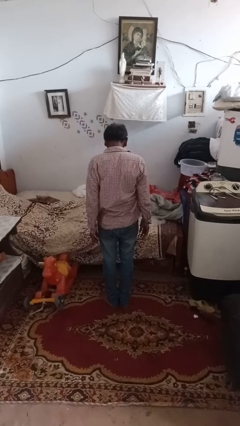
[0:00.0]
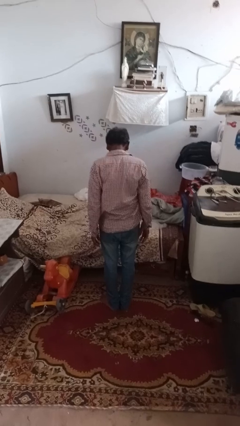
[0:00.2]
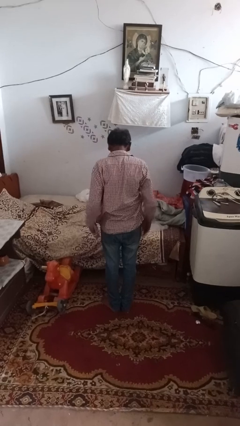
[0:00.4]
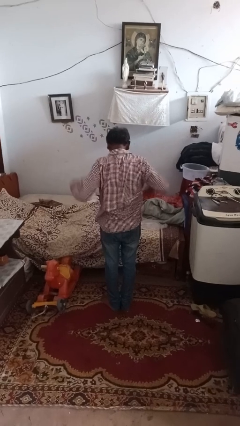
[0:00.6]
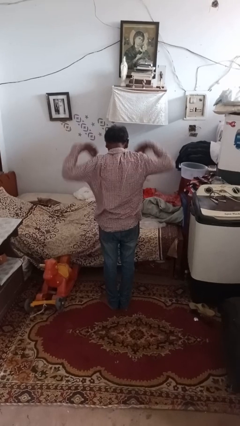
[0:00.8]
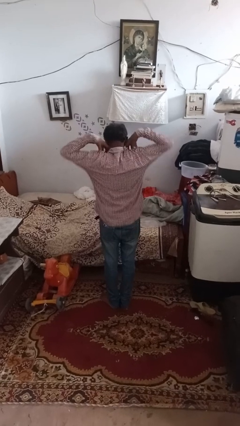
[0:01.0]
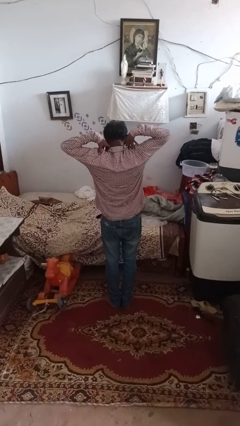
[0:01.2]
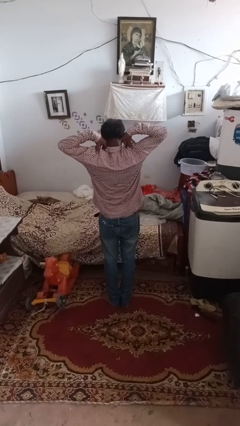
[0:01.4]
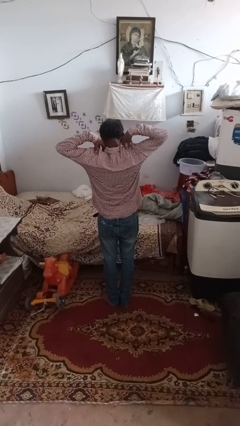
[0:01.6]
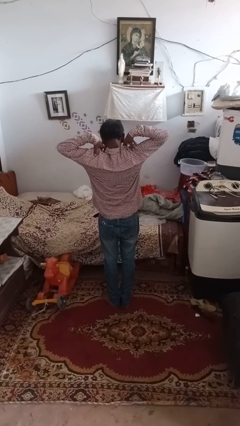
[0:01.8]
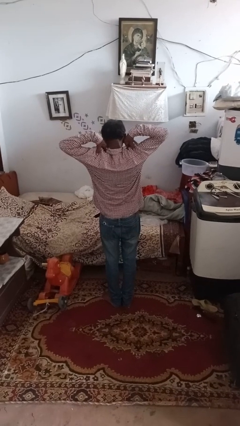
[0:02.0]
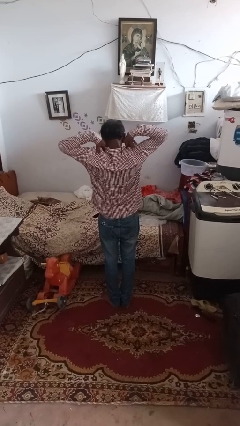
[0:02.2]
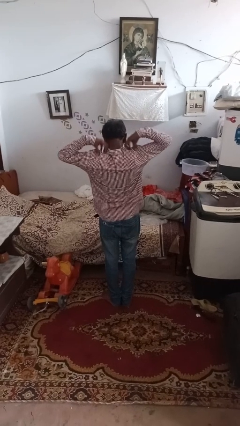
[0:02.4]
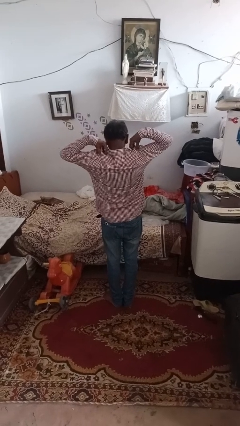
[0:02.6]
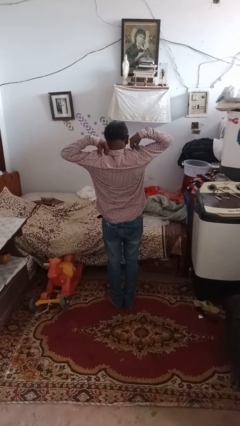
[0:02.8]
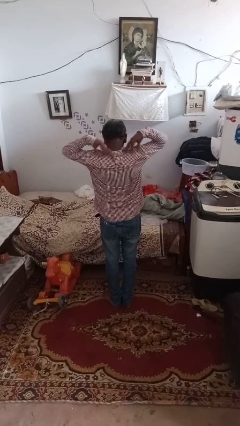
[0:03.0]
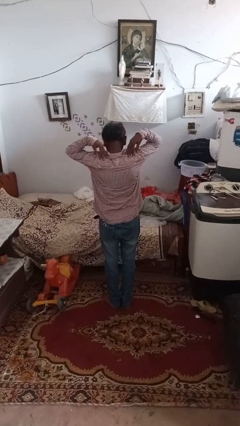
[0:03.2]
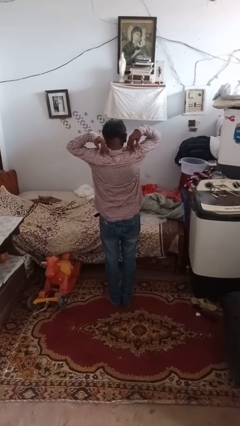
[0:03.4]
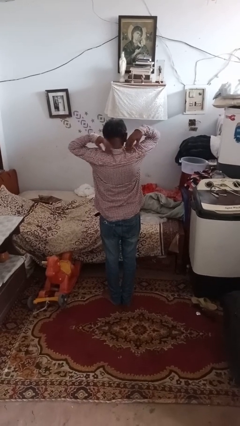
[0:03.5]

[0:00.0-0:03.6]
person sneezes into arm

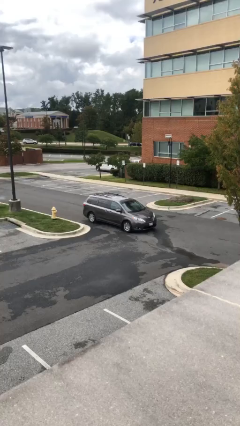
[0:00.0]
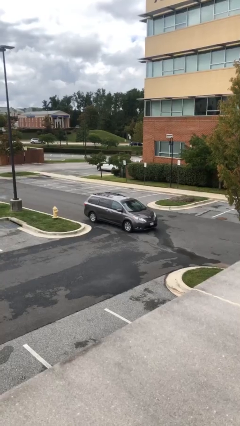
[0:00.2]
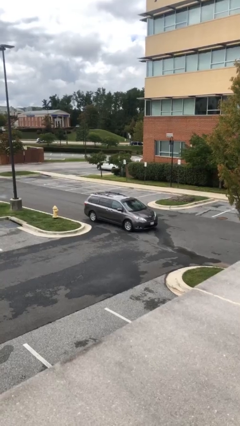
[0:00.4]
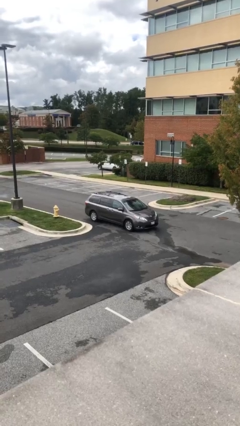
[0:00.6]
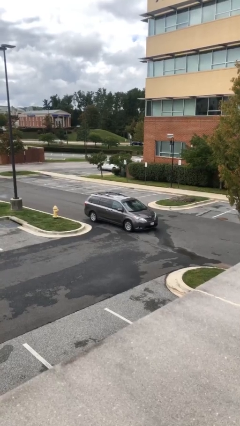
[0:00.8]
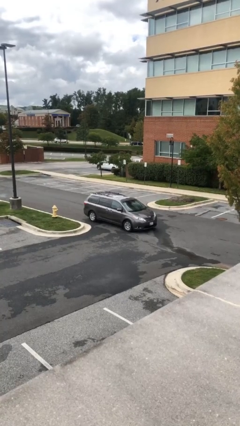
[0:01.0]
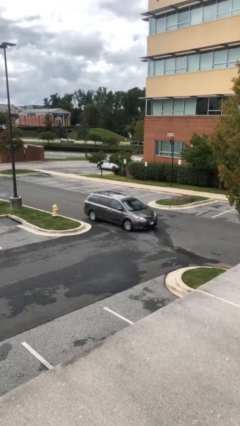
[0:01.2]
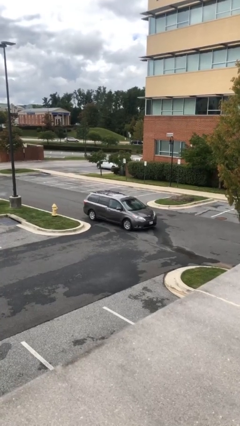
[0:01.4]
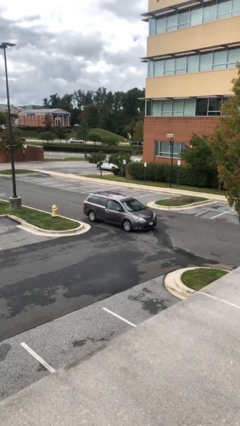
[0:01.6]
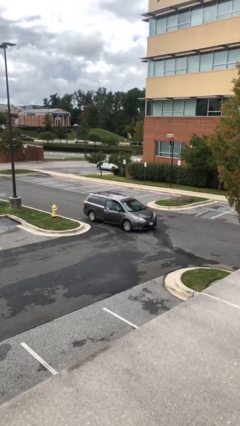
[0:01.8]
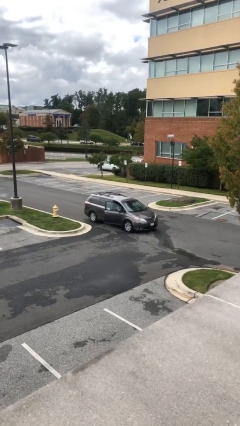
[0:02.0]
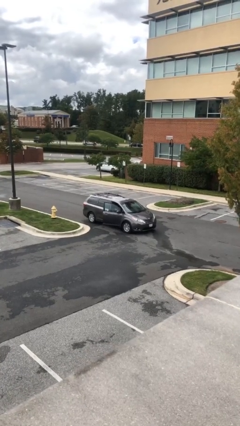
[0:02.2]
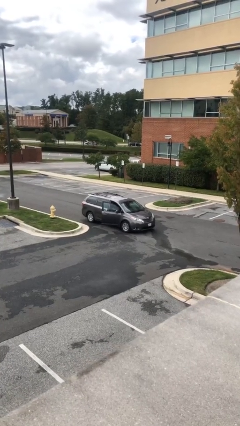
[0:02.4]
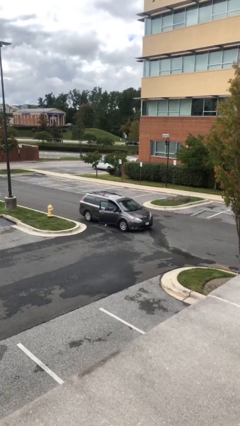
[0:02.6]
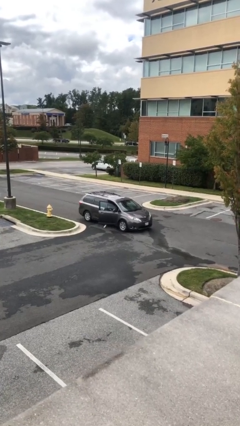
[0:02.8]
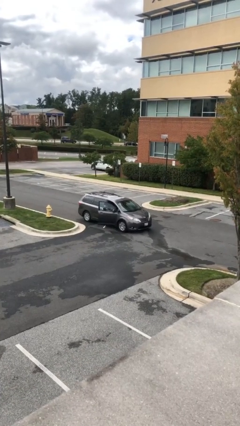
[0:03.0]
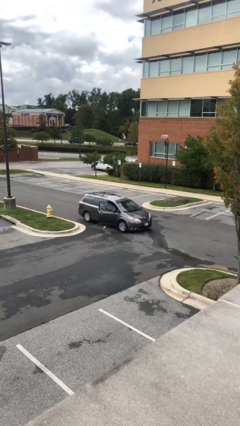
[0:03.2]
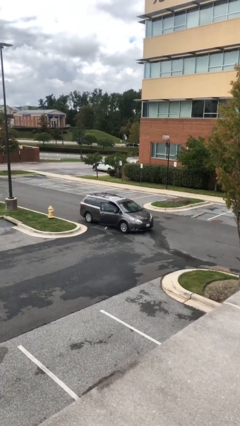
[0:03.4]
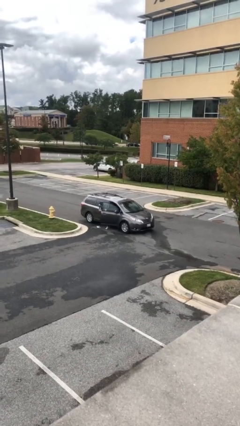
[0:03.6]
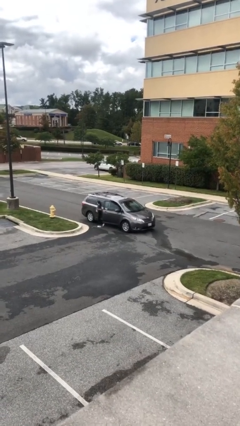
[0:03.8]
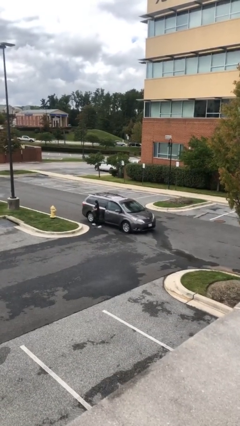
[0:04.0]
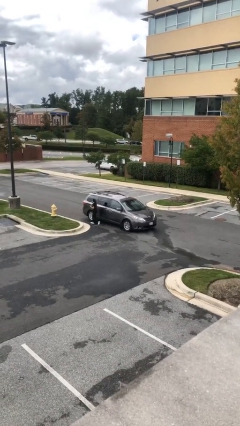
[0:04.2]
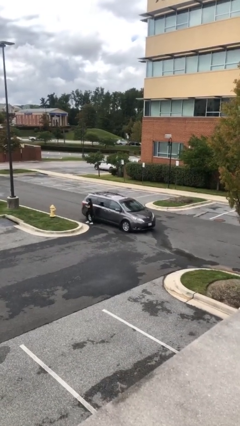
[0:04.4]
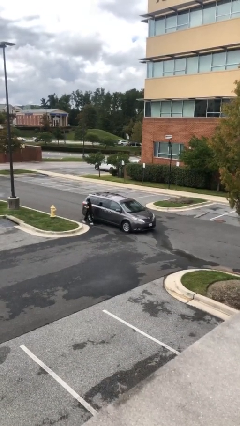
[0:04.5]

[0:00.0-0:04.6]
car drops off person

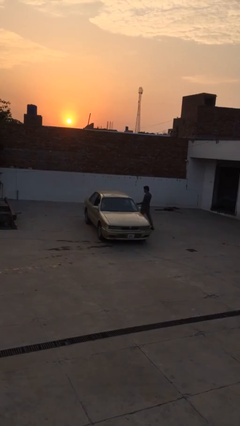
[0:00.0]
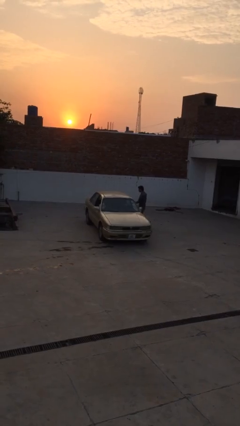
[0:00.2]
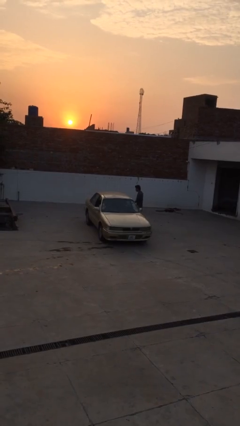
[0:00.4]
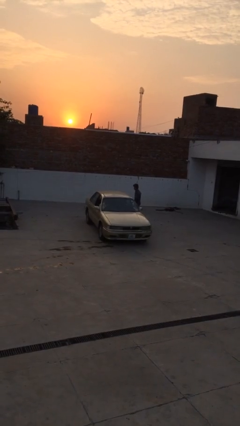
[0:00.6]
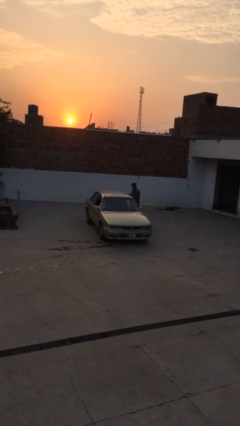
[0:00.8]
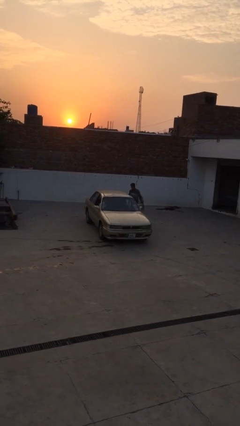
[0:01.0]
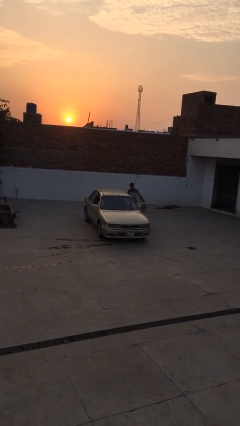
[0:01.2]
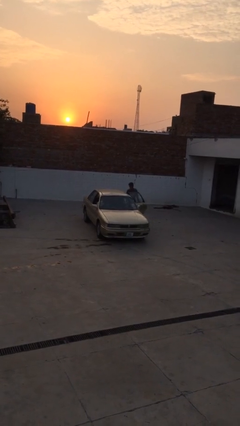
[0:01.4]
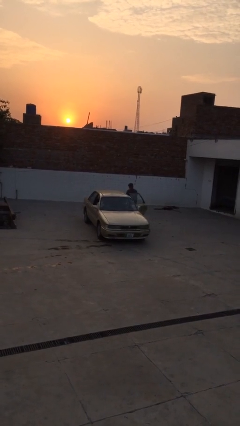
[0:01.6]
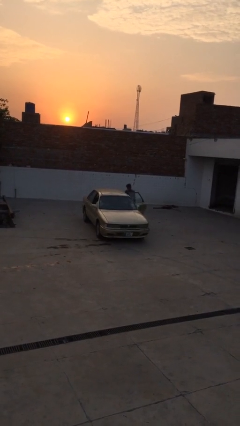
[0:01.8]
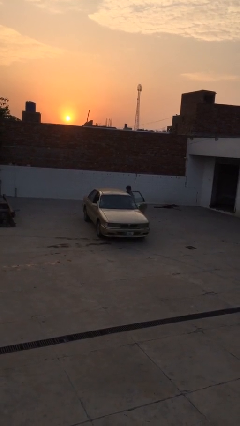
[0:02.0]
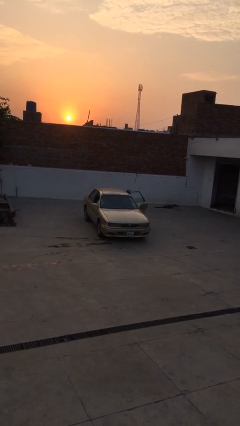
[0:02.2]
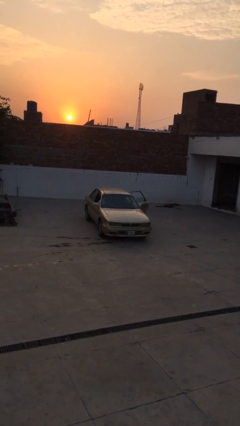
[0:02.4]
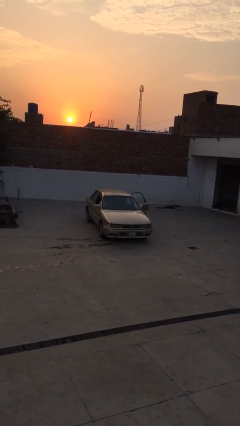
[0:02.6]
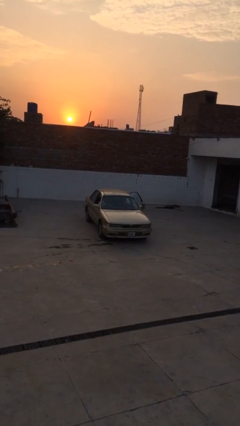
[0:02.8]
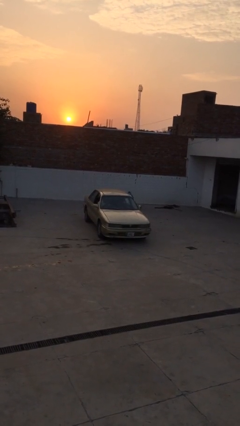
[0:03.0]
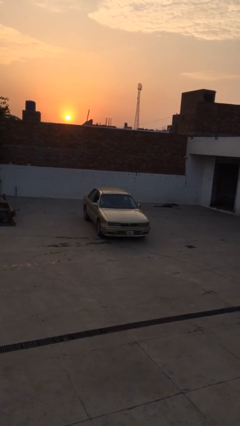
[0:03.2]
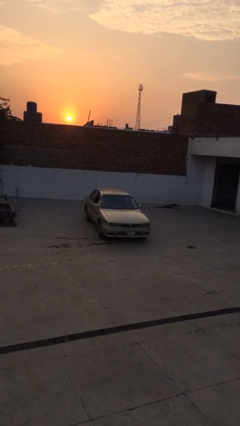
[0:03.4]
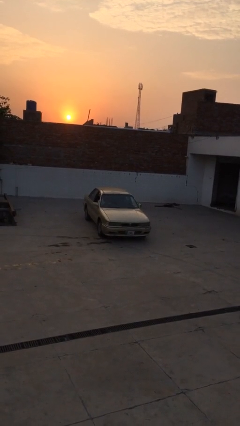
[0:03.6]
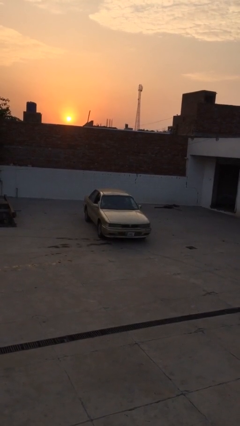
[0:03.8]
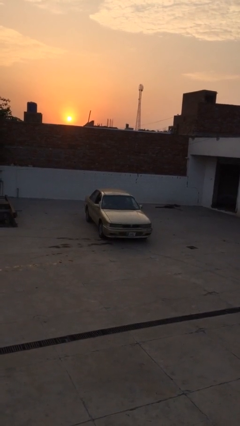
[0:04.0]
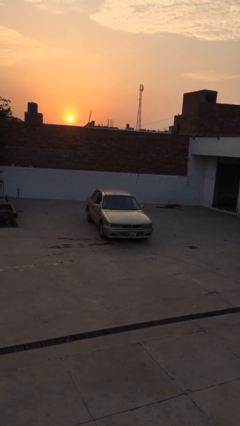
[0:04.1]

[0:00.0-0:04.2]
car picks up person

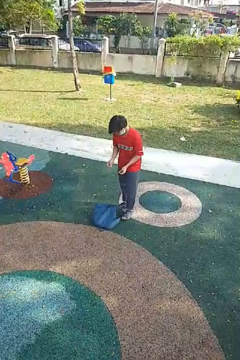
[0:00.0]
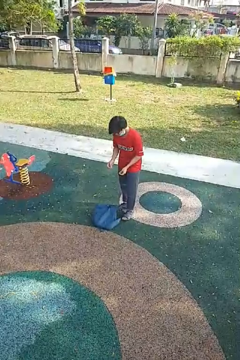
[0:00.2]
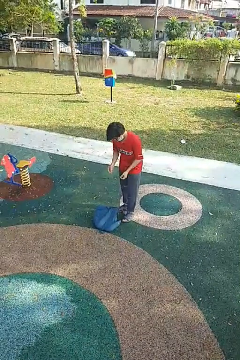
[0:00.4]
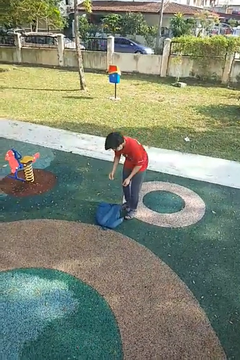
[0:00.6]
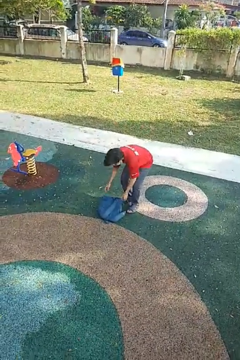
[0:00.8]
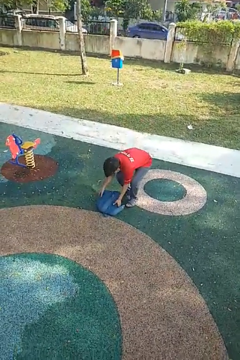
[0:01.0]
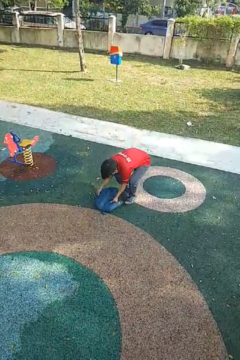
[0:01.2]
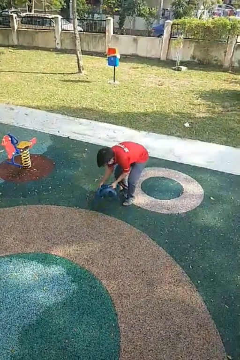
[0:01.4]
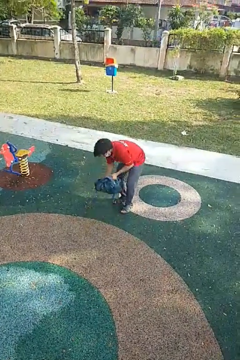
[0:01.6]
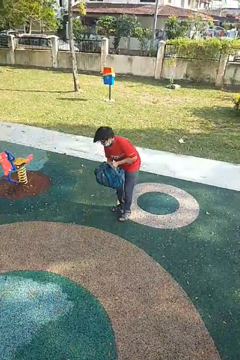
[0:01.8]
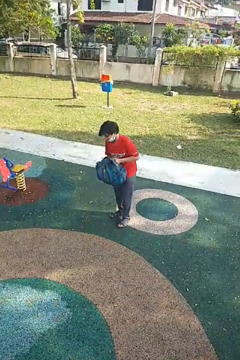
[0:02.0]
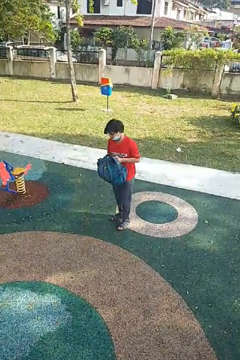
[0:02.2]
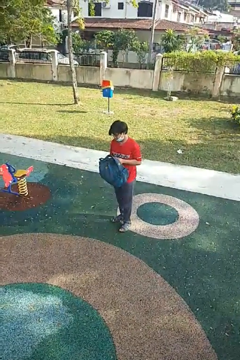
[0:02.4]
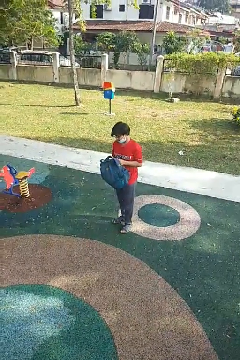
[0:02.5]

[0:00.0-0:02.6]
person picks up object from floor

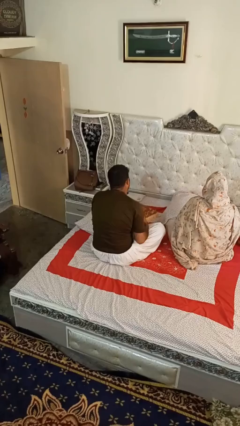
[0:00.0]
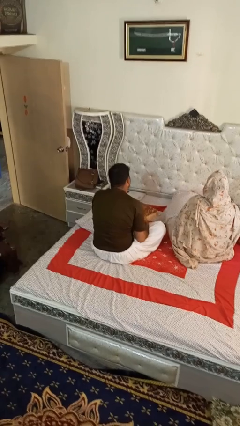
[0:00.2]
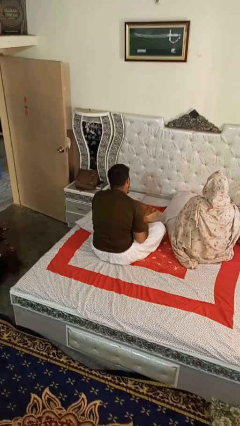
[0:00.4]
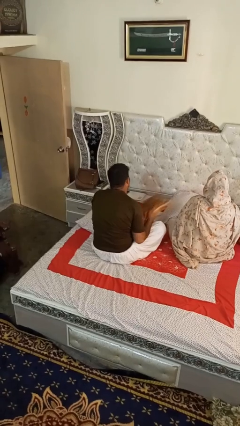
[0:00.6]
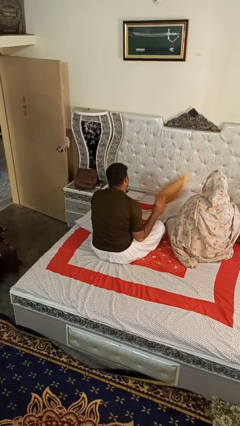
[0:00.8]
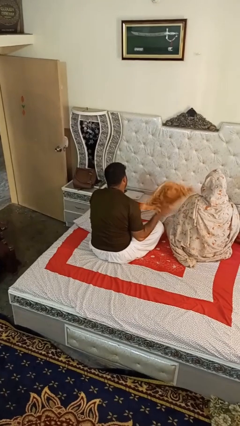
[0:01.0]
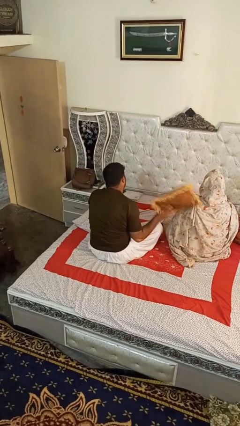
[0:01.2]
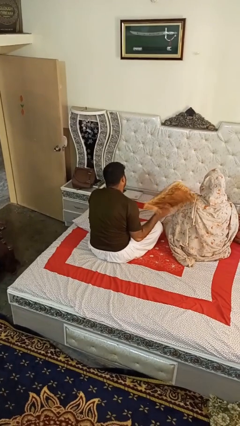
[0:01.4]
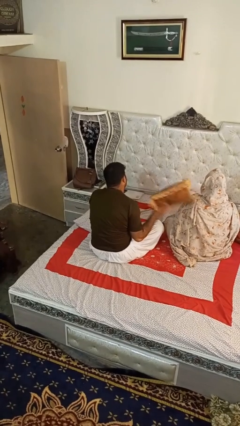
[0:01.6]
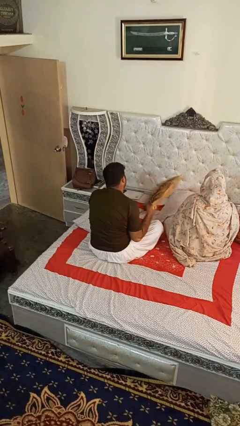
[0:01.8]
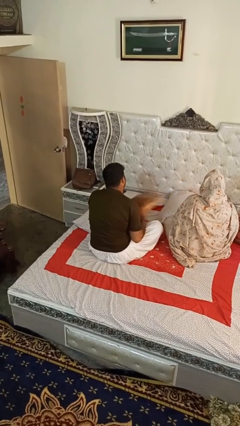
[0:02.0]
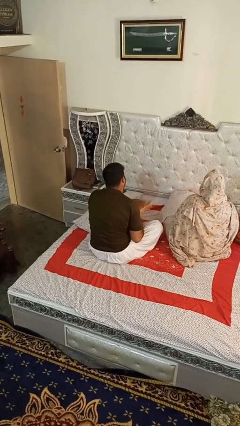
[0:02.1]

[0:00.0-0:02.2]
person hits person with pillow

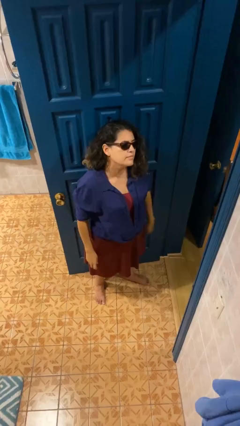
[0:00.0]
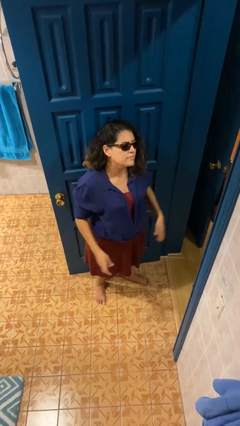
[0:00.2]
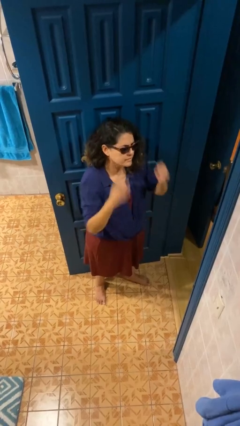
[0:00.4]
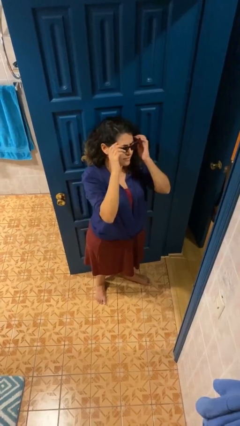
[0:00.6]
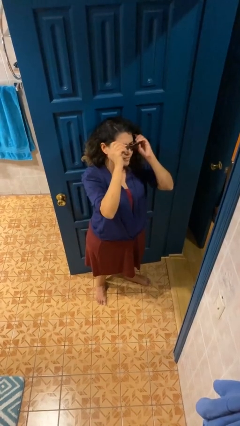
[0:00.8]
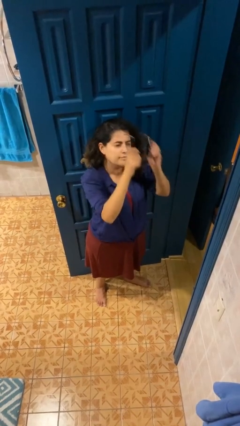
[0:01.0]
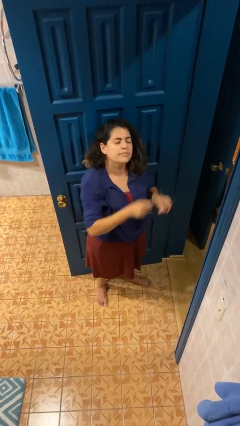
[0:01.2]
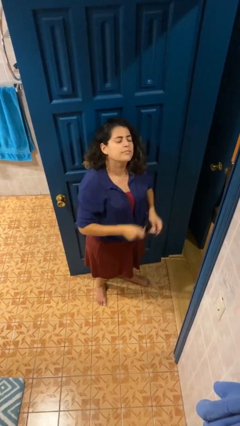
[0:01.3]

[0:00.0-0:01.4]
person takes off sunglasses
